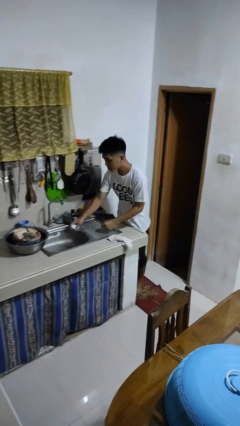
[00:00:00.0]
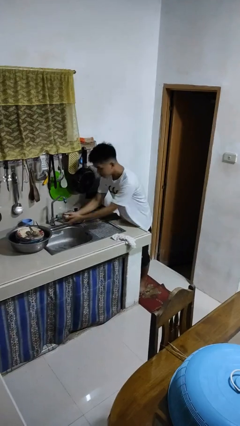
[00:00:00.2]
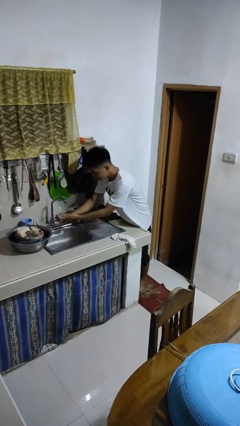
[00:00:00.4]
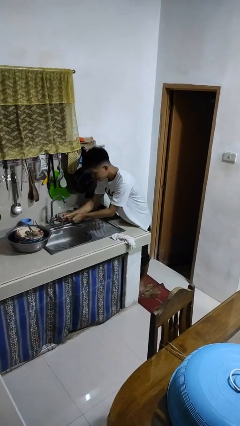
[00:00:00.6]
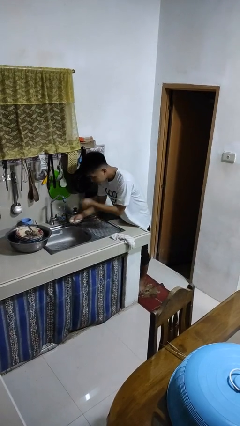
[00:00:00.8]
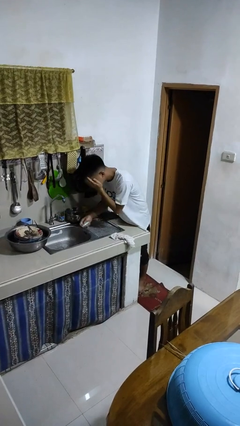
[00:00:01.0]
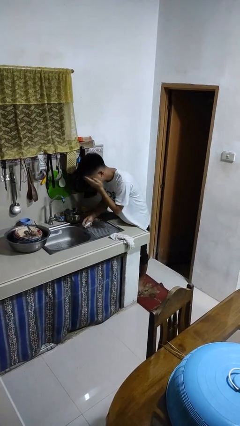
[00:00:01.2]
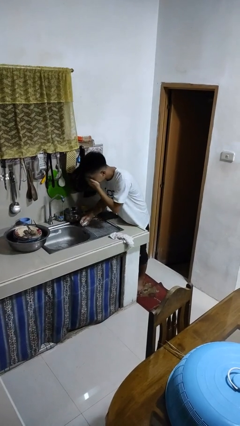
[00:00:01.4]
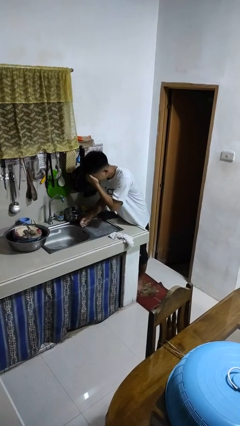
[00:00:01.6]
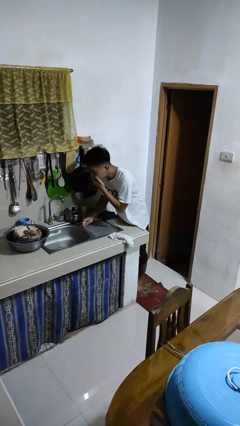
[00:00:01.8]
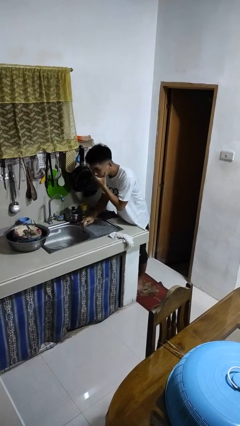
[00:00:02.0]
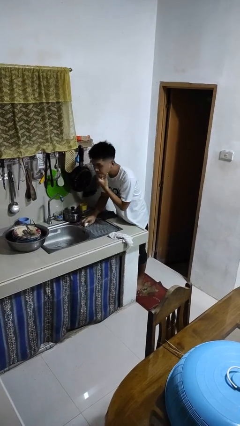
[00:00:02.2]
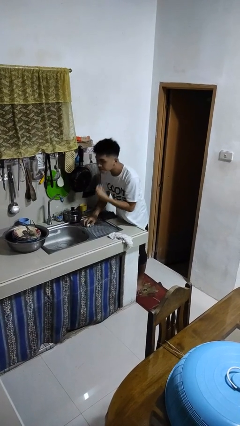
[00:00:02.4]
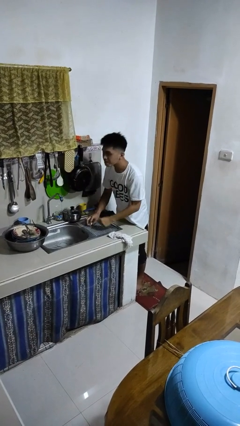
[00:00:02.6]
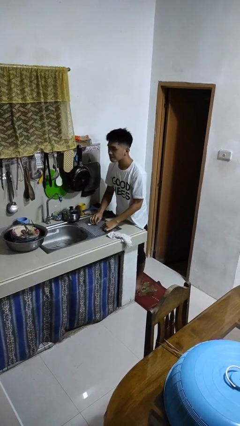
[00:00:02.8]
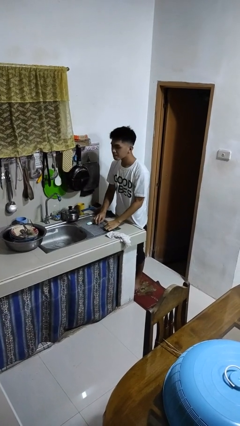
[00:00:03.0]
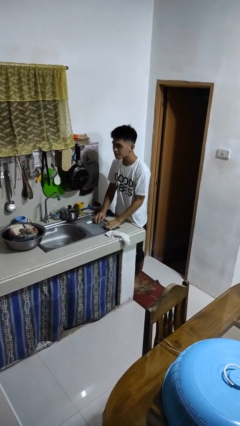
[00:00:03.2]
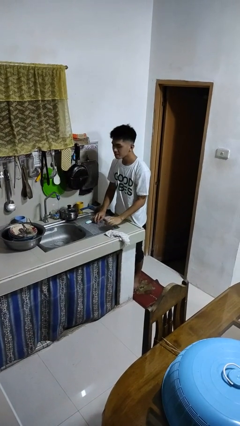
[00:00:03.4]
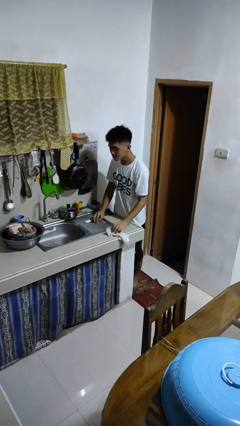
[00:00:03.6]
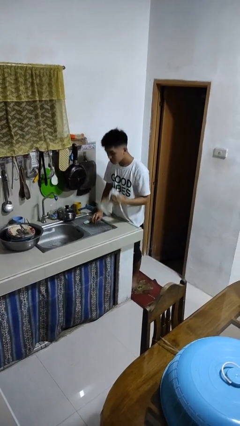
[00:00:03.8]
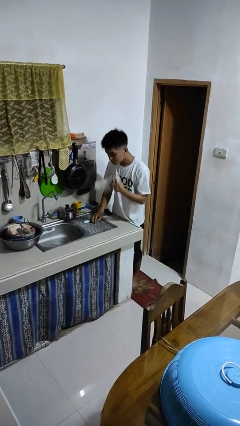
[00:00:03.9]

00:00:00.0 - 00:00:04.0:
person washes face

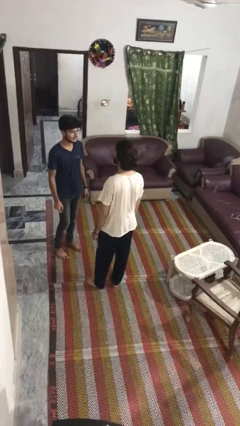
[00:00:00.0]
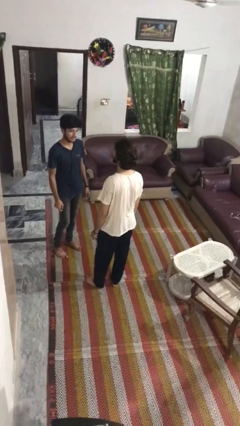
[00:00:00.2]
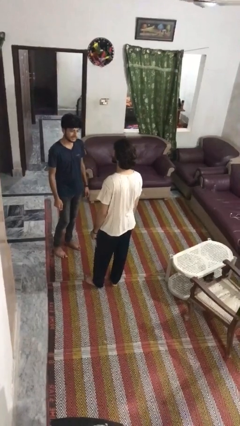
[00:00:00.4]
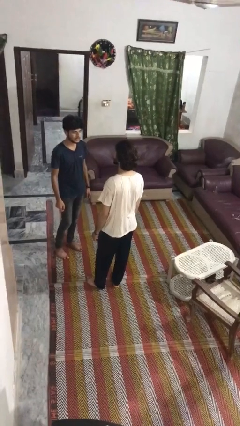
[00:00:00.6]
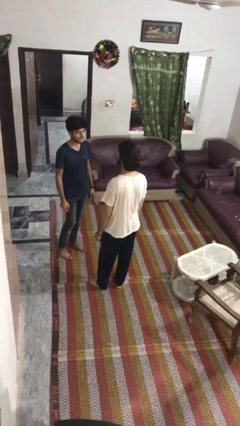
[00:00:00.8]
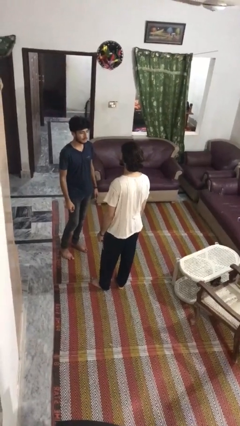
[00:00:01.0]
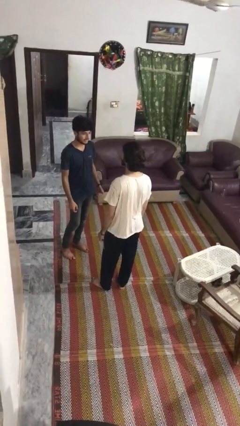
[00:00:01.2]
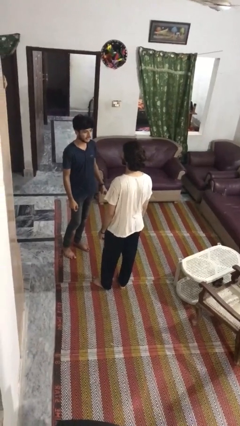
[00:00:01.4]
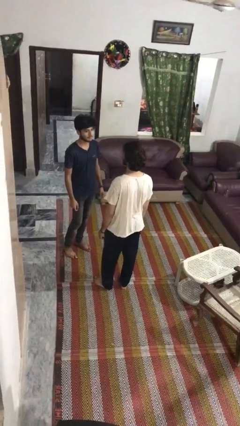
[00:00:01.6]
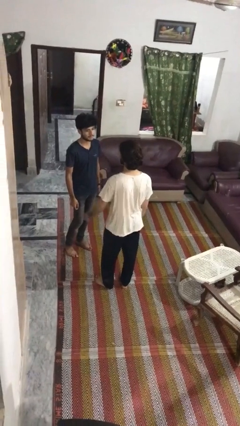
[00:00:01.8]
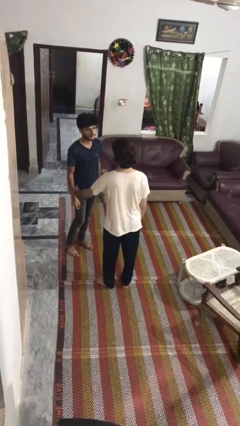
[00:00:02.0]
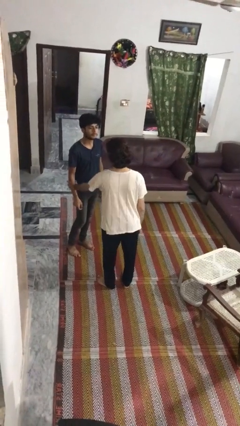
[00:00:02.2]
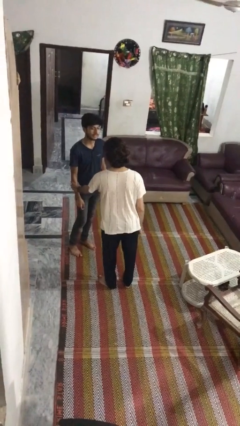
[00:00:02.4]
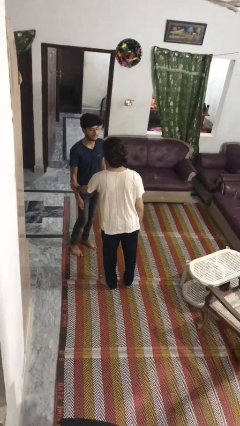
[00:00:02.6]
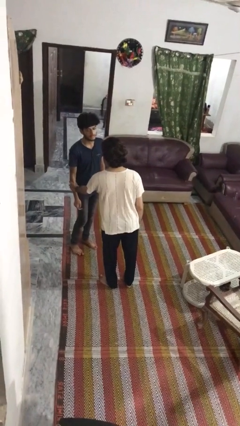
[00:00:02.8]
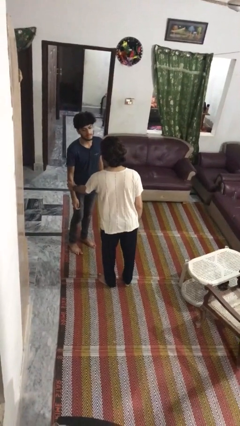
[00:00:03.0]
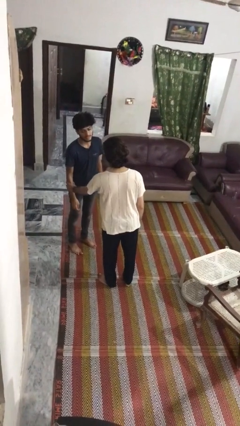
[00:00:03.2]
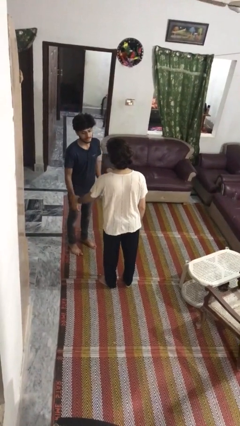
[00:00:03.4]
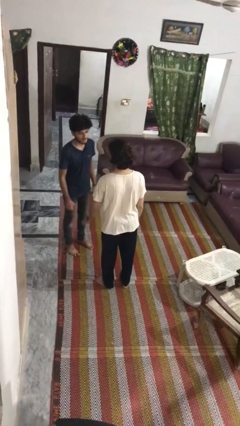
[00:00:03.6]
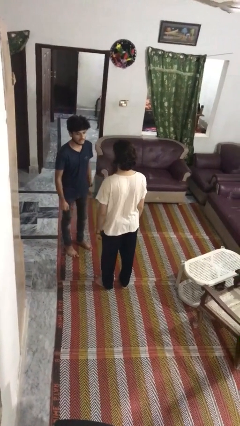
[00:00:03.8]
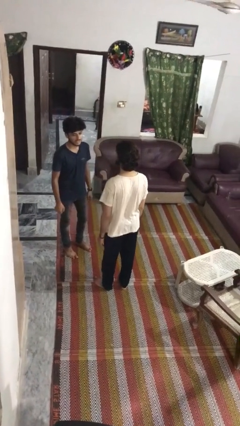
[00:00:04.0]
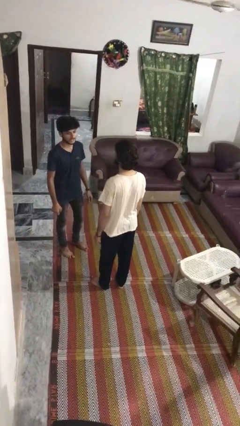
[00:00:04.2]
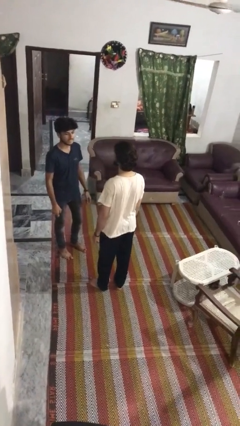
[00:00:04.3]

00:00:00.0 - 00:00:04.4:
person grabs person by forearm

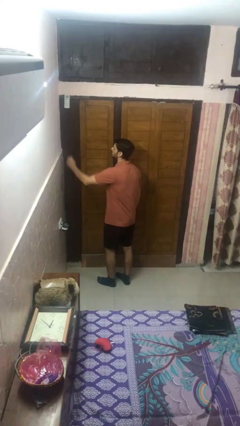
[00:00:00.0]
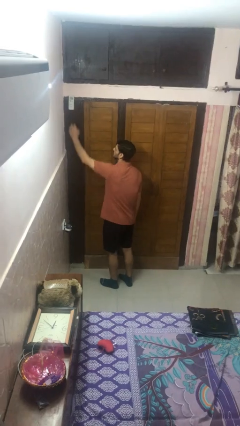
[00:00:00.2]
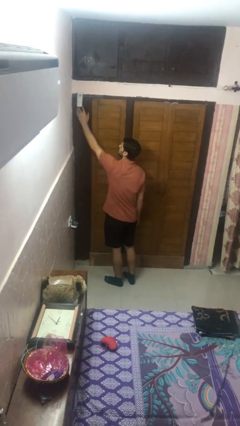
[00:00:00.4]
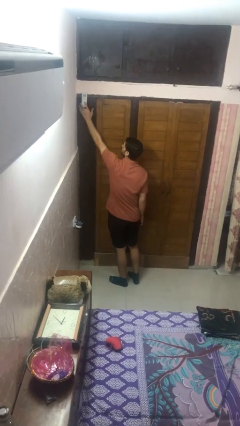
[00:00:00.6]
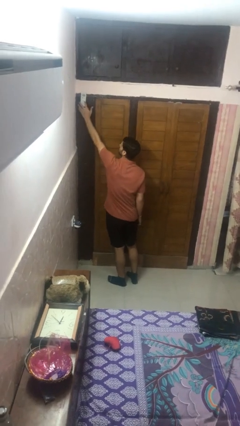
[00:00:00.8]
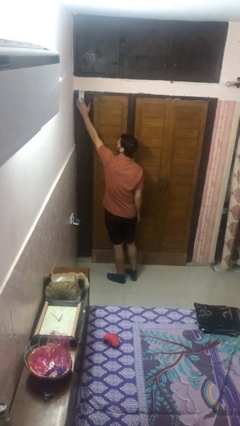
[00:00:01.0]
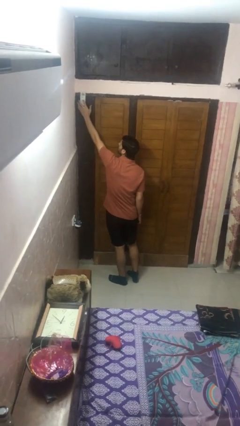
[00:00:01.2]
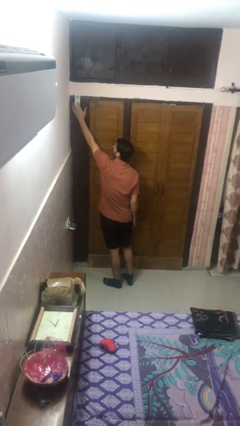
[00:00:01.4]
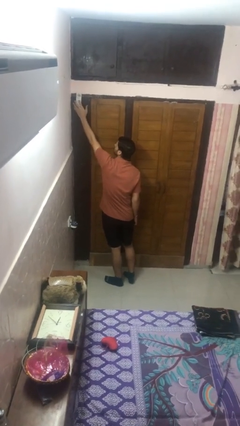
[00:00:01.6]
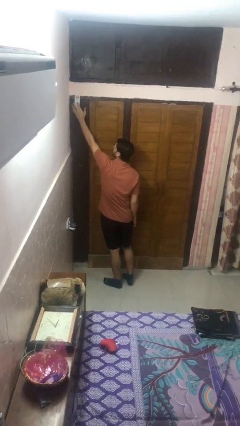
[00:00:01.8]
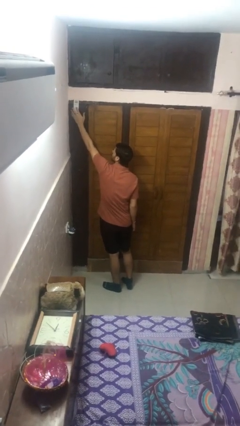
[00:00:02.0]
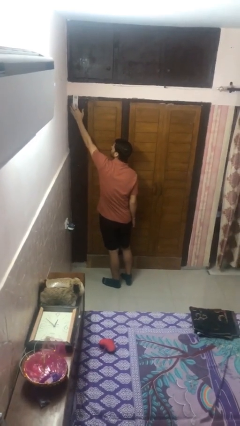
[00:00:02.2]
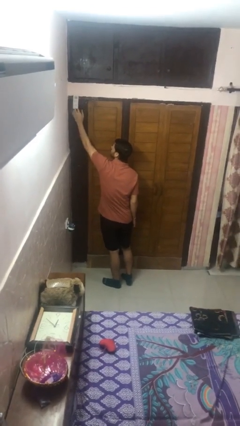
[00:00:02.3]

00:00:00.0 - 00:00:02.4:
person adjusts thermostat

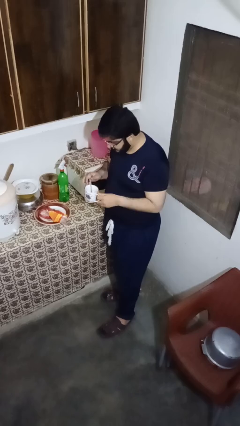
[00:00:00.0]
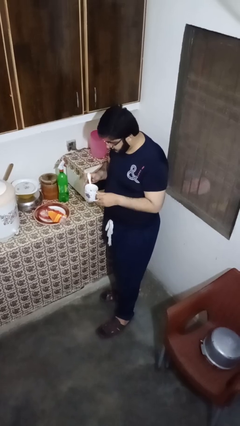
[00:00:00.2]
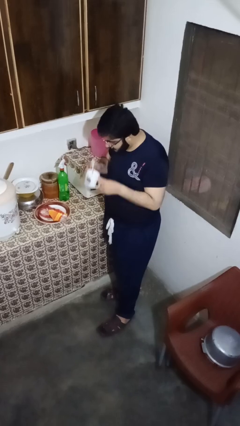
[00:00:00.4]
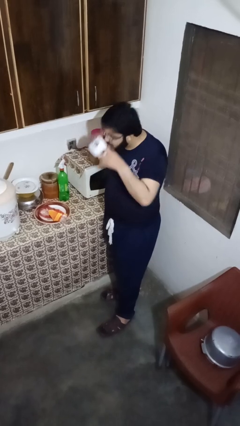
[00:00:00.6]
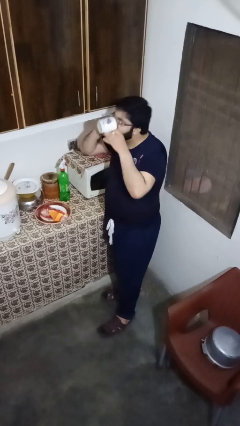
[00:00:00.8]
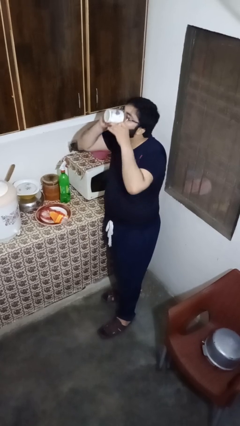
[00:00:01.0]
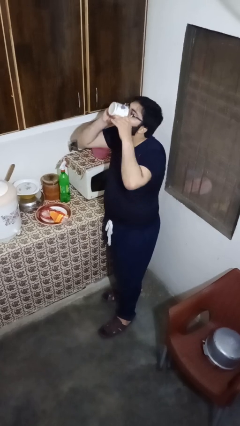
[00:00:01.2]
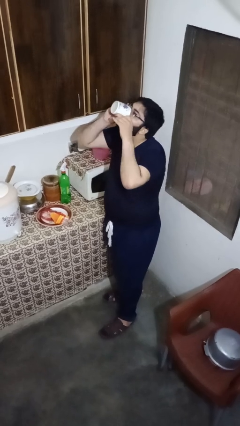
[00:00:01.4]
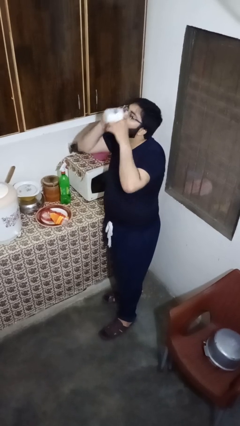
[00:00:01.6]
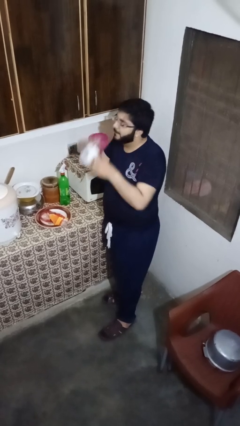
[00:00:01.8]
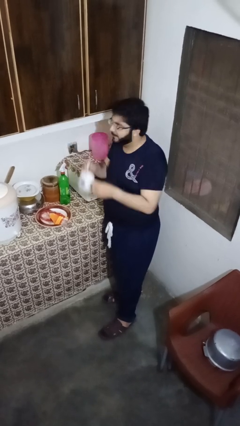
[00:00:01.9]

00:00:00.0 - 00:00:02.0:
person drinks from mug

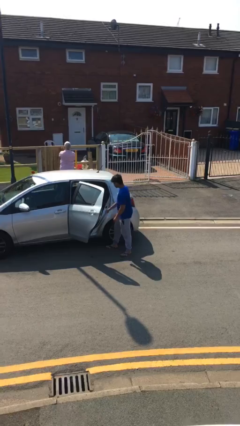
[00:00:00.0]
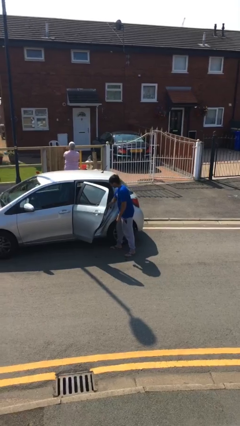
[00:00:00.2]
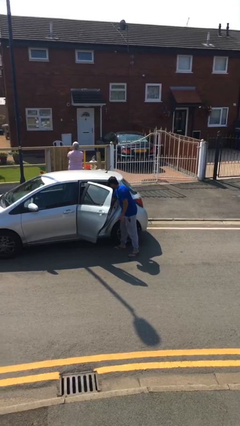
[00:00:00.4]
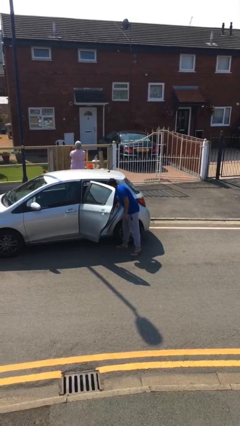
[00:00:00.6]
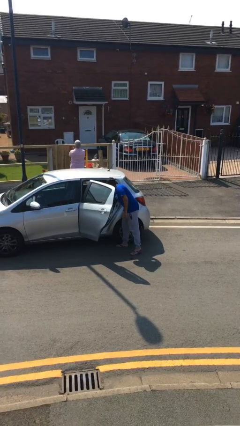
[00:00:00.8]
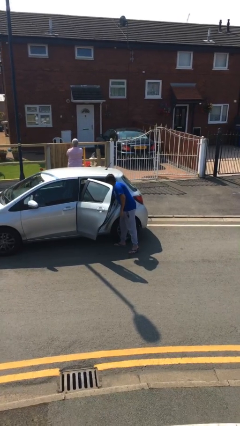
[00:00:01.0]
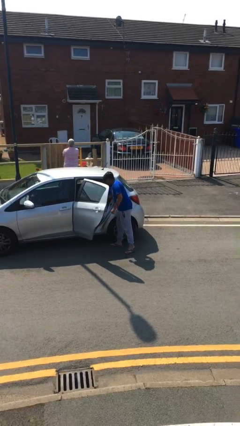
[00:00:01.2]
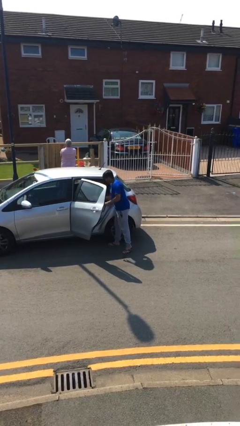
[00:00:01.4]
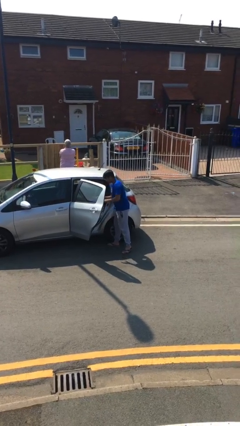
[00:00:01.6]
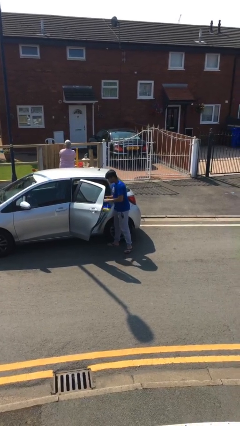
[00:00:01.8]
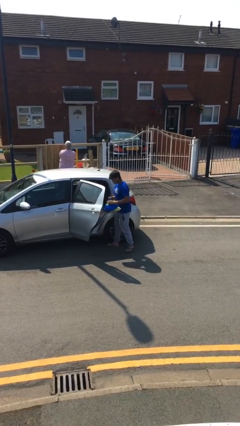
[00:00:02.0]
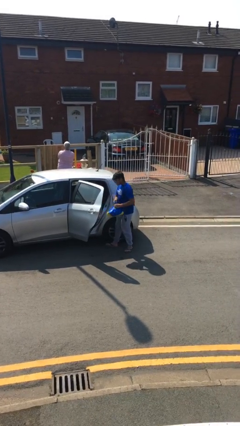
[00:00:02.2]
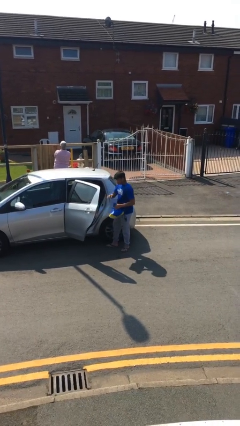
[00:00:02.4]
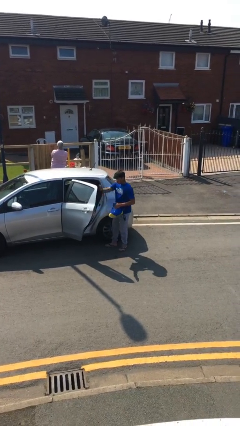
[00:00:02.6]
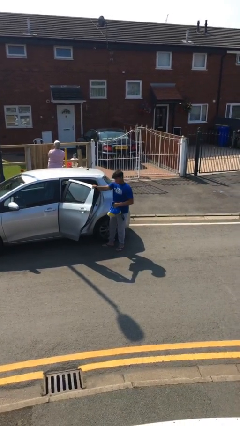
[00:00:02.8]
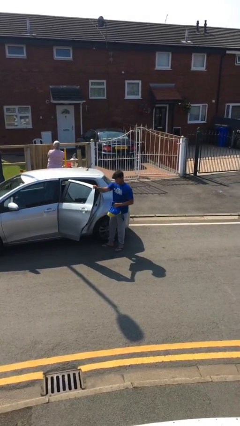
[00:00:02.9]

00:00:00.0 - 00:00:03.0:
person unloads car

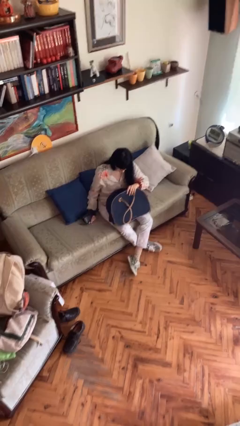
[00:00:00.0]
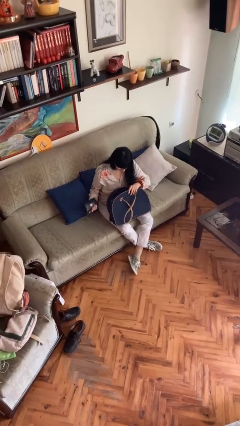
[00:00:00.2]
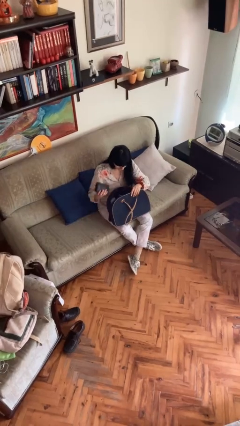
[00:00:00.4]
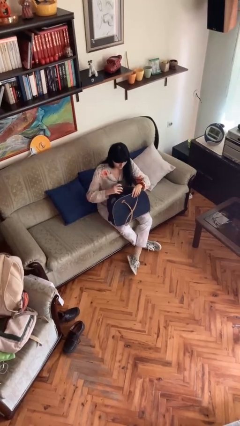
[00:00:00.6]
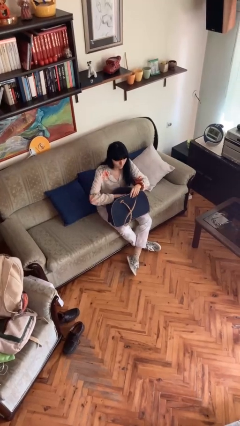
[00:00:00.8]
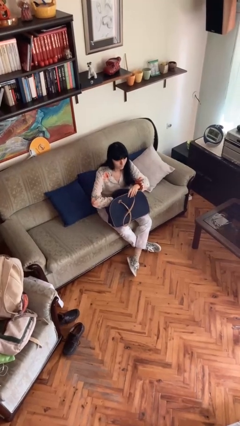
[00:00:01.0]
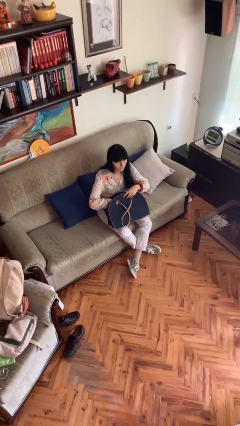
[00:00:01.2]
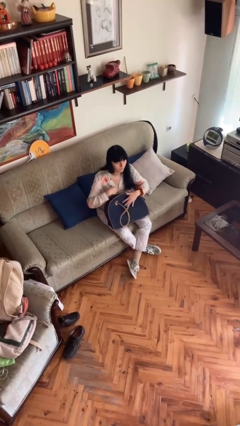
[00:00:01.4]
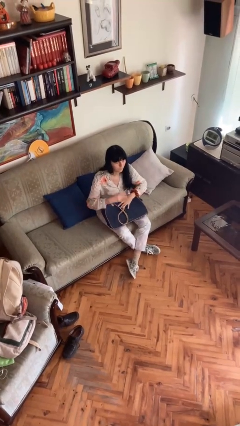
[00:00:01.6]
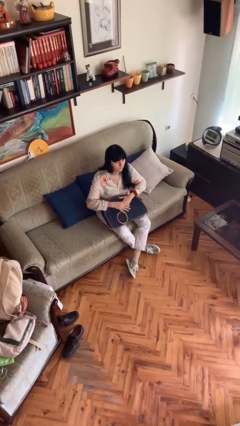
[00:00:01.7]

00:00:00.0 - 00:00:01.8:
person puts object into purse
